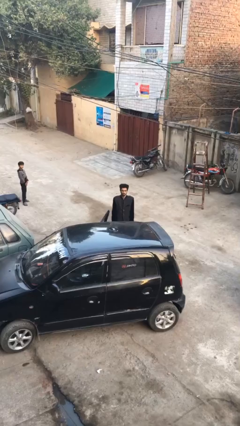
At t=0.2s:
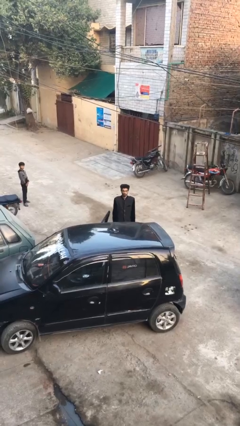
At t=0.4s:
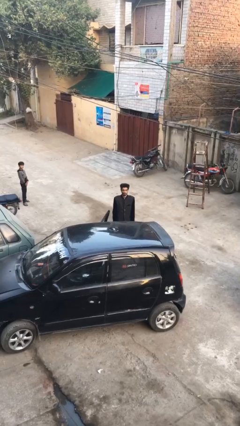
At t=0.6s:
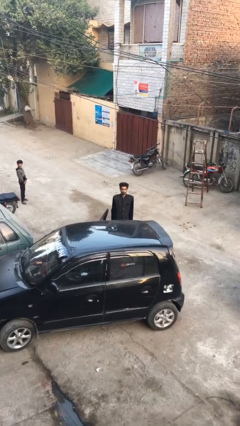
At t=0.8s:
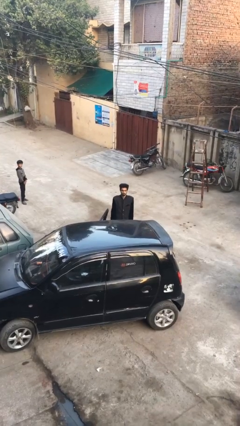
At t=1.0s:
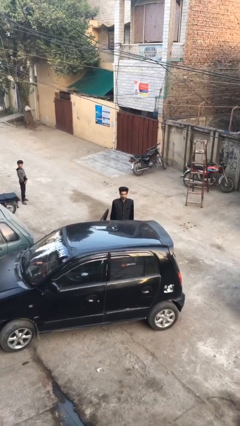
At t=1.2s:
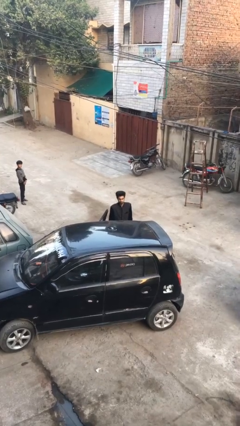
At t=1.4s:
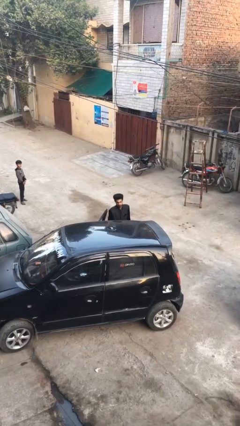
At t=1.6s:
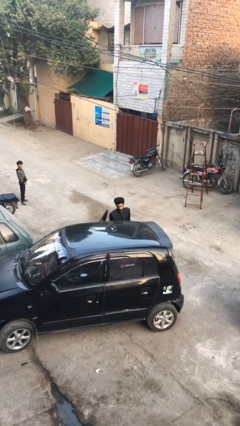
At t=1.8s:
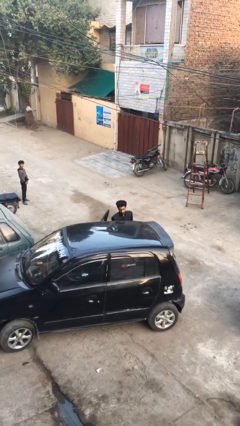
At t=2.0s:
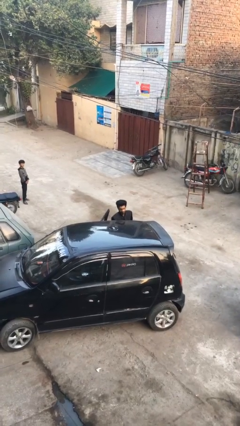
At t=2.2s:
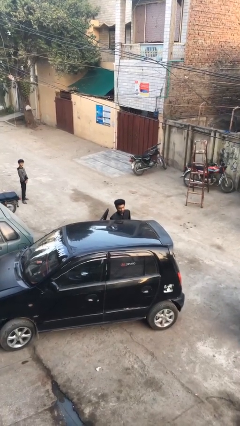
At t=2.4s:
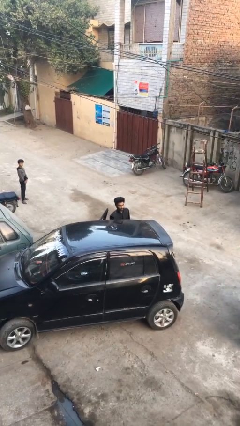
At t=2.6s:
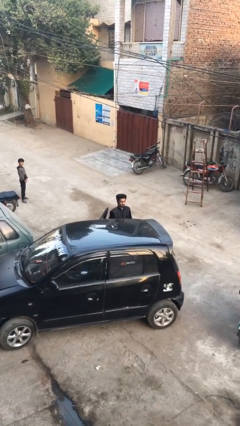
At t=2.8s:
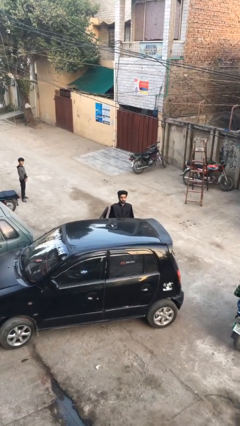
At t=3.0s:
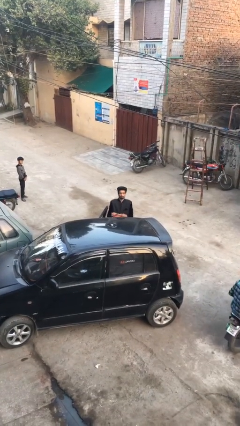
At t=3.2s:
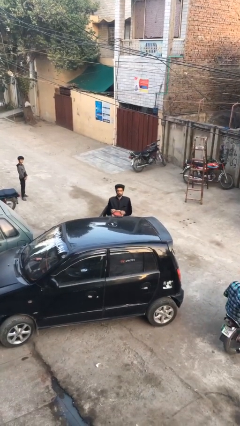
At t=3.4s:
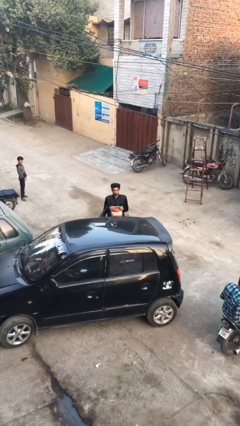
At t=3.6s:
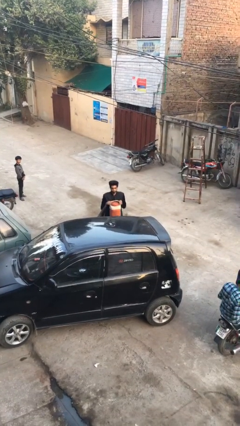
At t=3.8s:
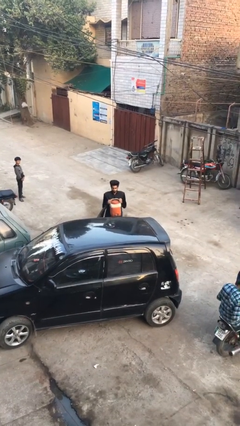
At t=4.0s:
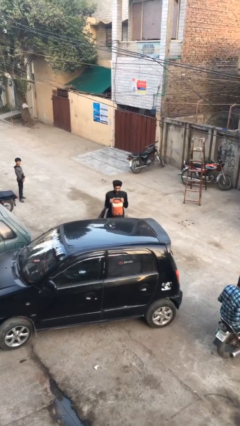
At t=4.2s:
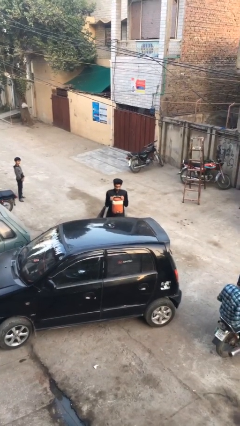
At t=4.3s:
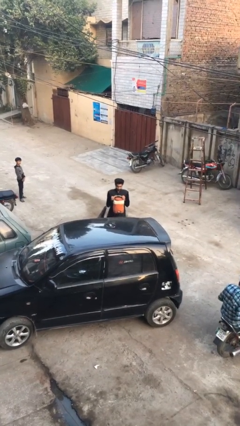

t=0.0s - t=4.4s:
person unloads car

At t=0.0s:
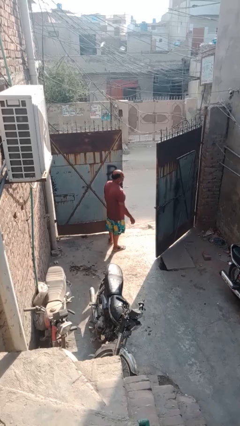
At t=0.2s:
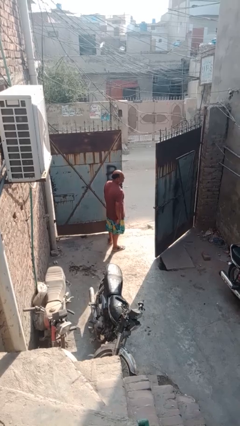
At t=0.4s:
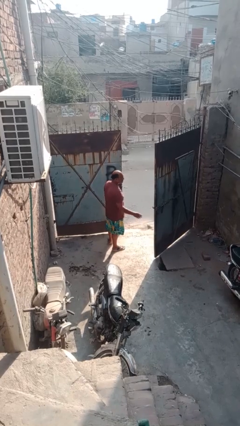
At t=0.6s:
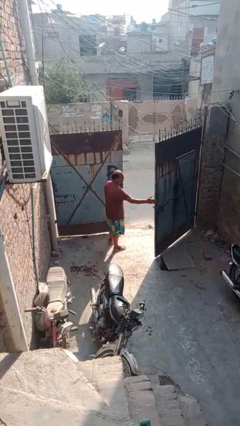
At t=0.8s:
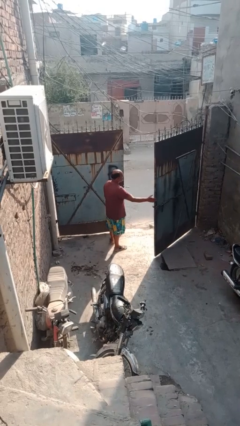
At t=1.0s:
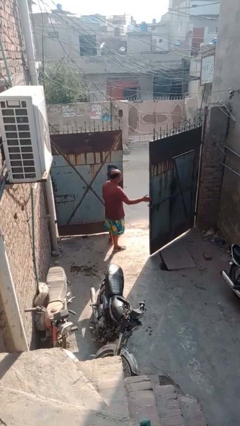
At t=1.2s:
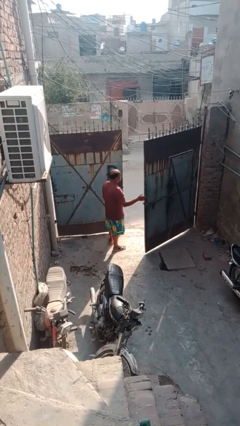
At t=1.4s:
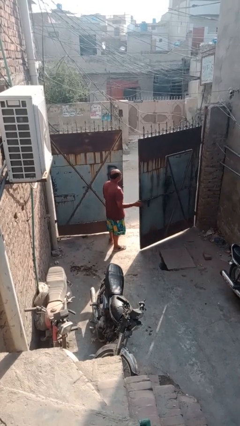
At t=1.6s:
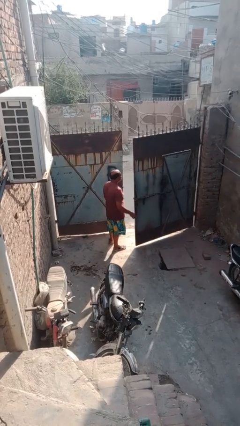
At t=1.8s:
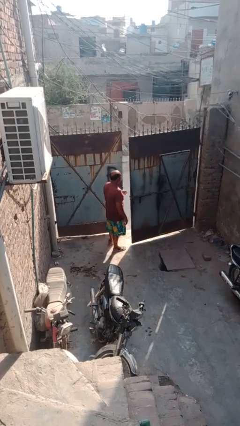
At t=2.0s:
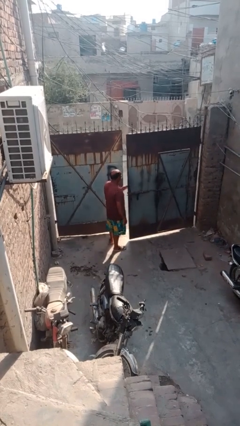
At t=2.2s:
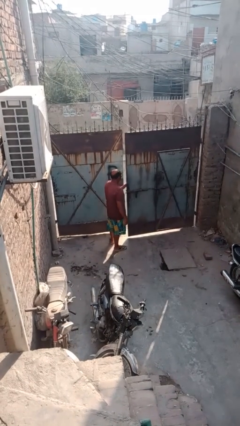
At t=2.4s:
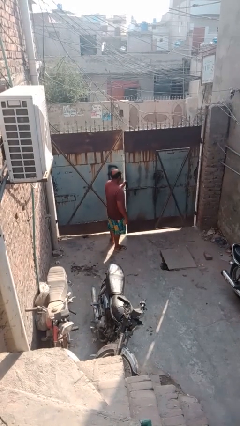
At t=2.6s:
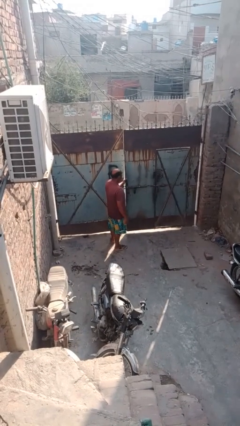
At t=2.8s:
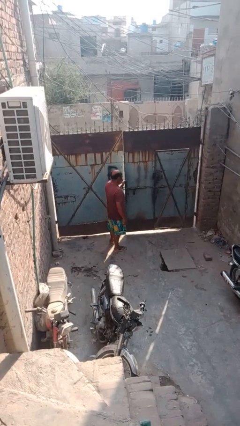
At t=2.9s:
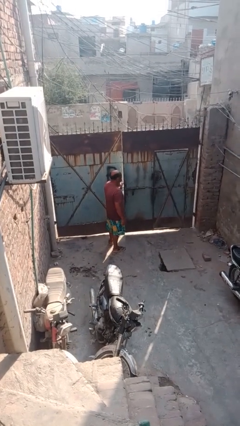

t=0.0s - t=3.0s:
person closes gate

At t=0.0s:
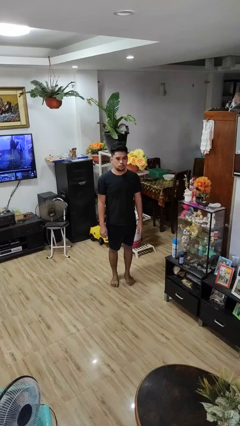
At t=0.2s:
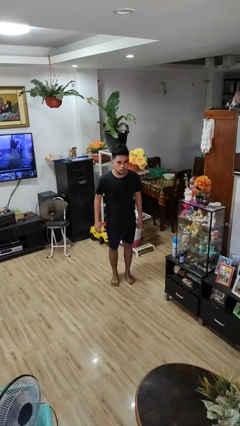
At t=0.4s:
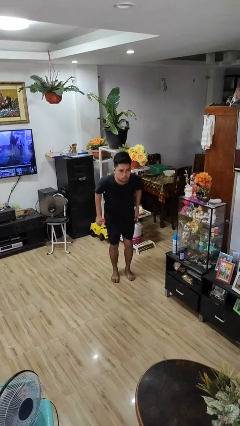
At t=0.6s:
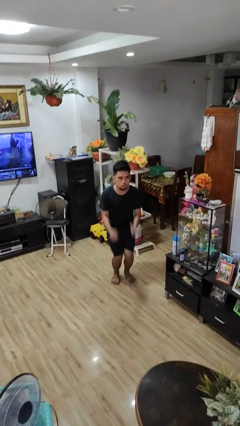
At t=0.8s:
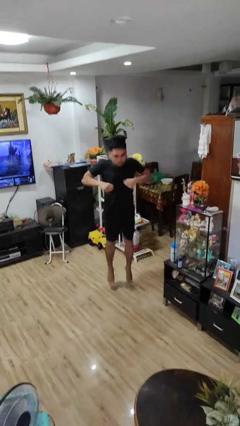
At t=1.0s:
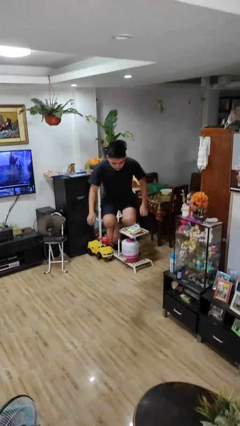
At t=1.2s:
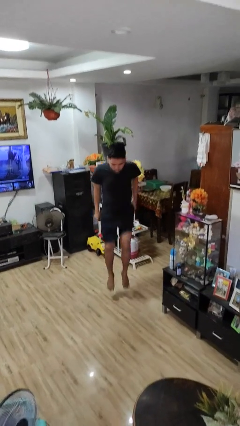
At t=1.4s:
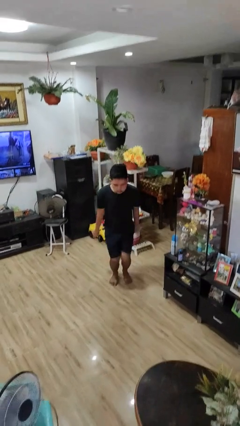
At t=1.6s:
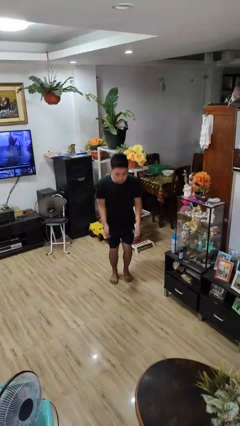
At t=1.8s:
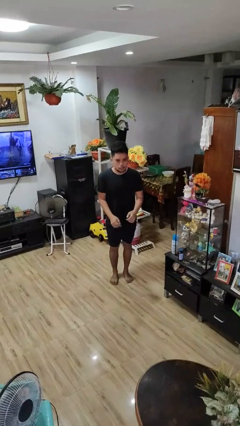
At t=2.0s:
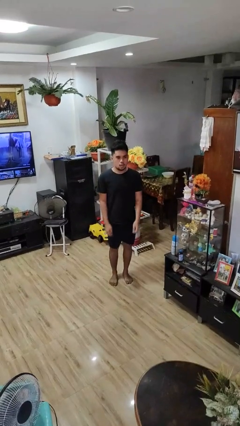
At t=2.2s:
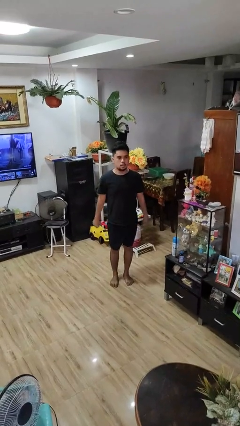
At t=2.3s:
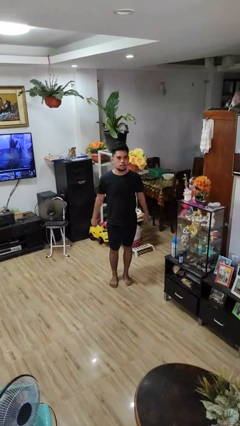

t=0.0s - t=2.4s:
person jumps

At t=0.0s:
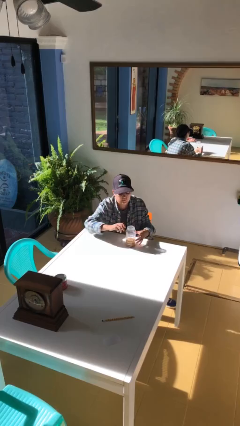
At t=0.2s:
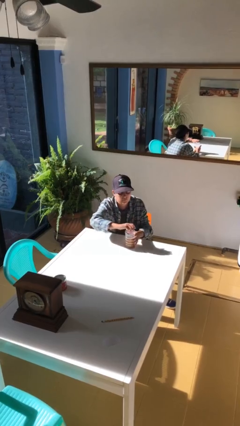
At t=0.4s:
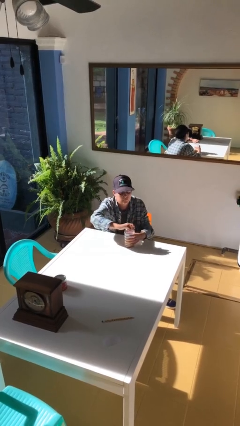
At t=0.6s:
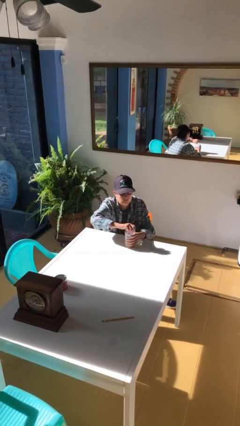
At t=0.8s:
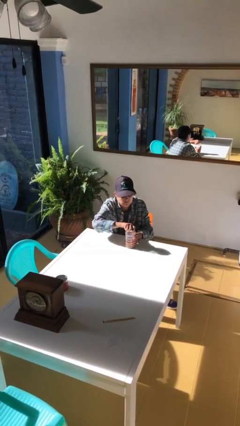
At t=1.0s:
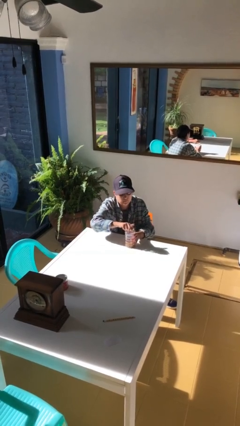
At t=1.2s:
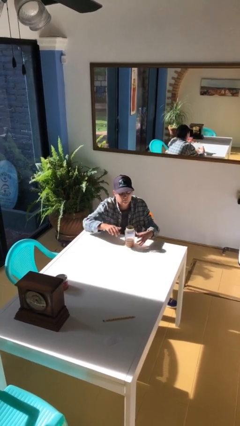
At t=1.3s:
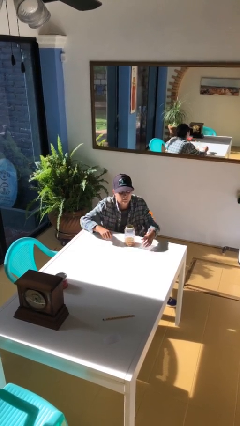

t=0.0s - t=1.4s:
person closes jar

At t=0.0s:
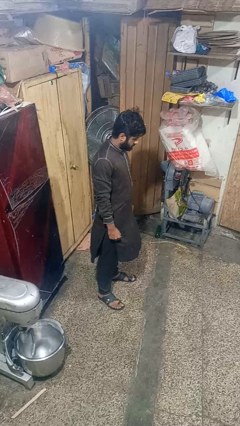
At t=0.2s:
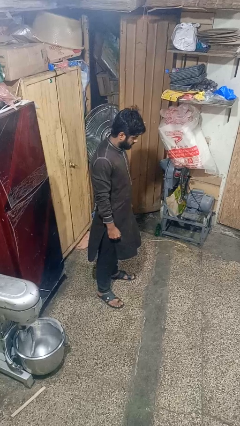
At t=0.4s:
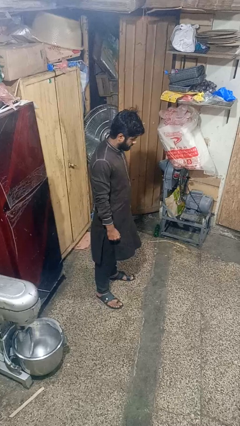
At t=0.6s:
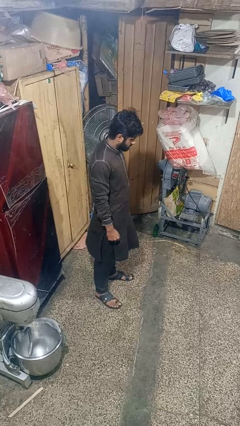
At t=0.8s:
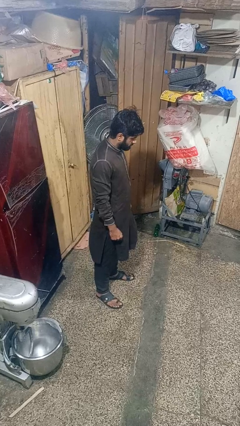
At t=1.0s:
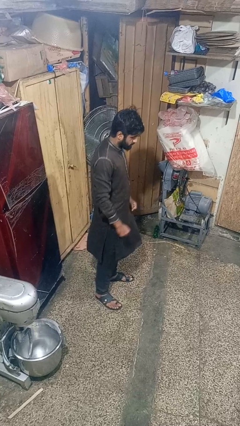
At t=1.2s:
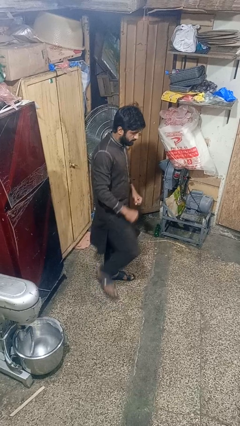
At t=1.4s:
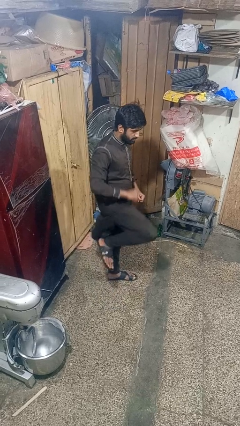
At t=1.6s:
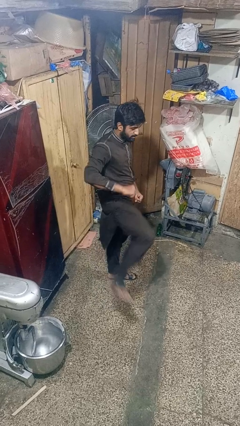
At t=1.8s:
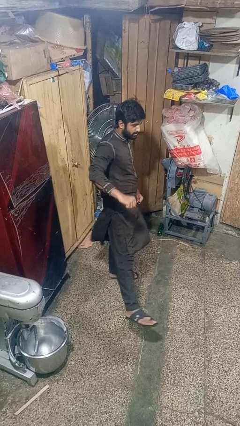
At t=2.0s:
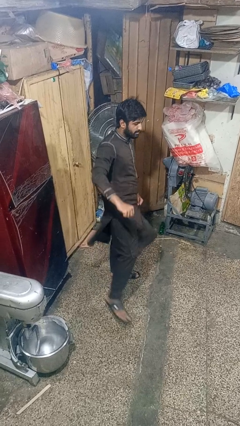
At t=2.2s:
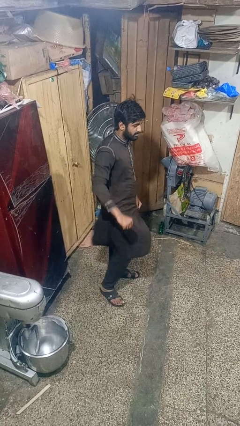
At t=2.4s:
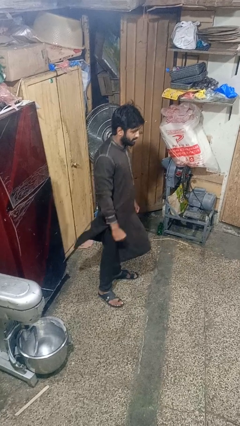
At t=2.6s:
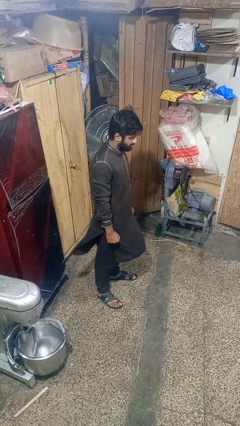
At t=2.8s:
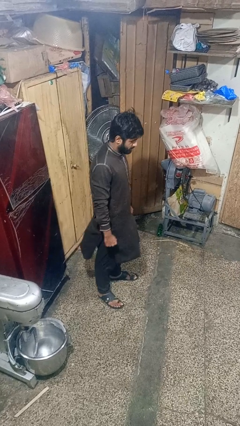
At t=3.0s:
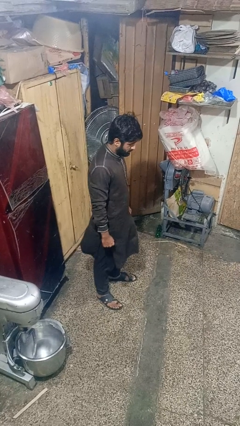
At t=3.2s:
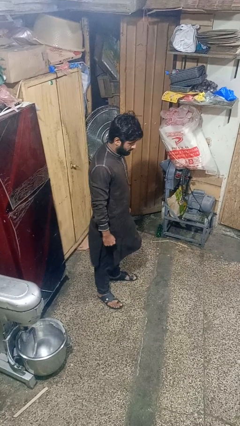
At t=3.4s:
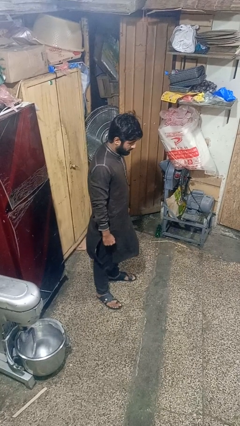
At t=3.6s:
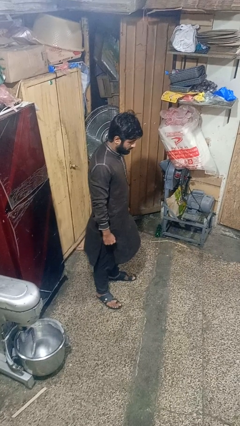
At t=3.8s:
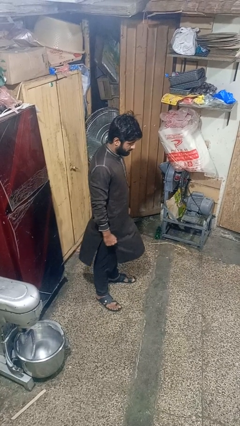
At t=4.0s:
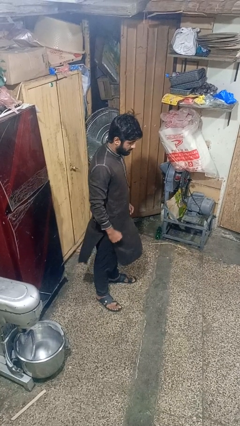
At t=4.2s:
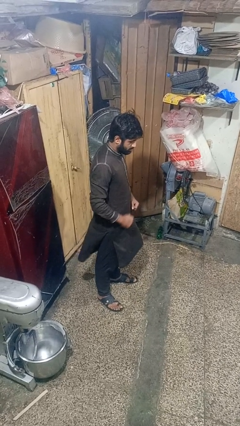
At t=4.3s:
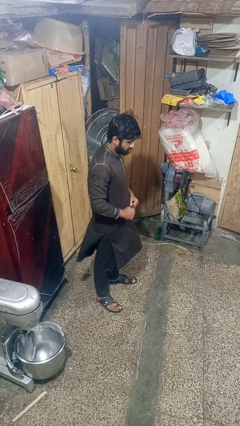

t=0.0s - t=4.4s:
person karate kicks

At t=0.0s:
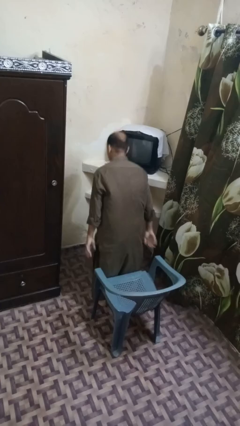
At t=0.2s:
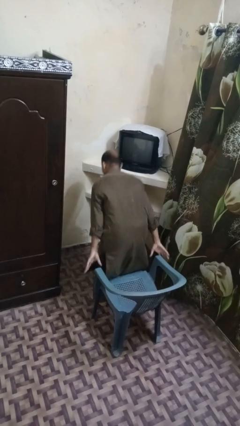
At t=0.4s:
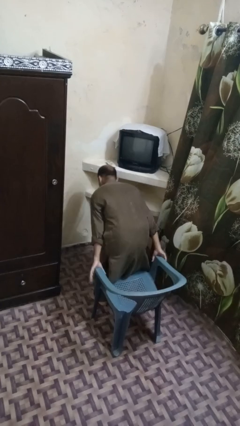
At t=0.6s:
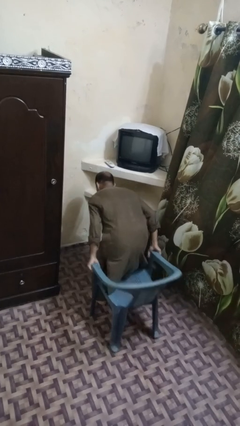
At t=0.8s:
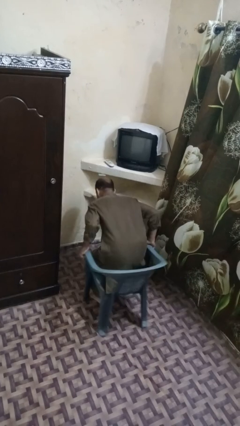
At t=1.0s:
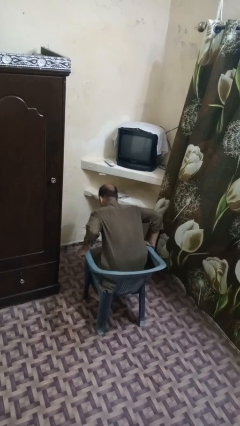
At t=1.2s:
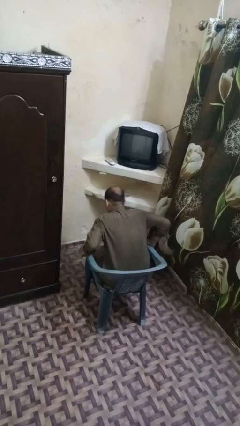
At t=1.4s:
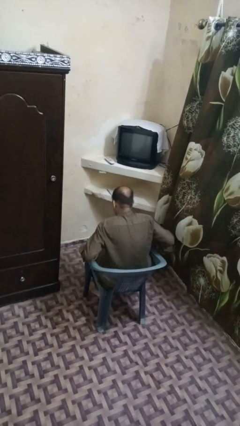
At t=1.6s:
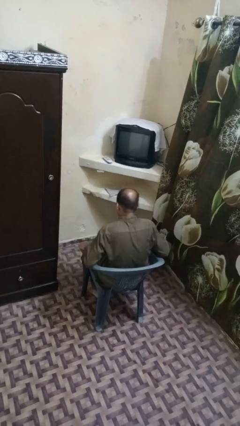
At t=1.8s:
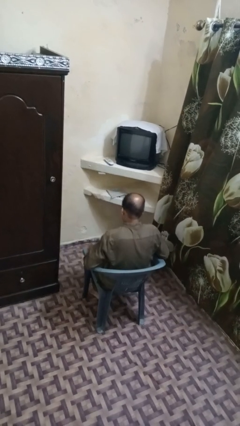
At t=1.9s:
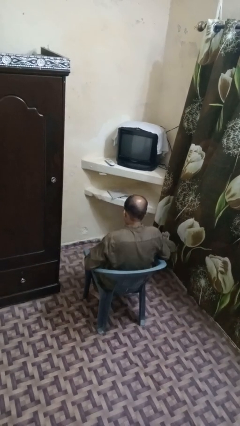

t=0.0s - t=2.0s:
person sits down
